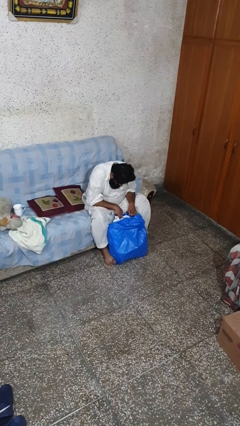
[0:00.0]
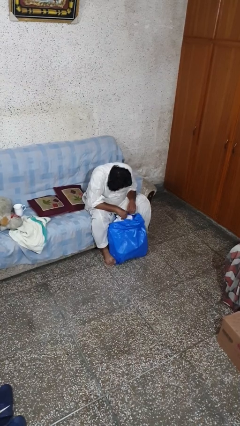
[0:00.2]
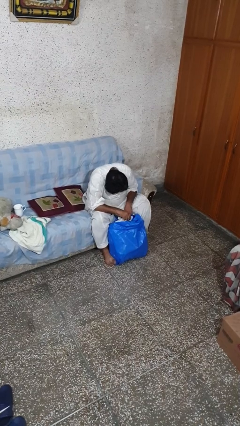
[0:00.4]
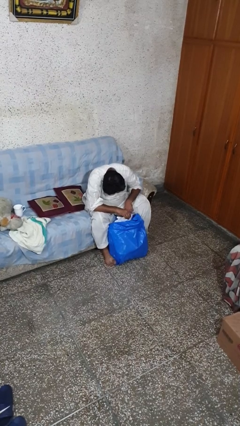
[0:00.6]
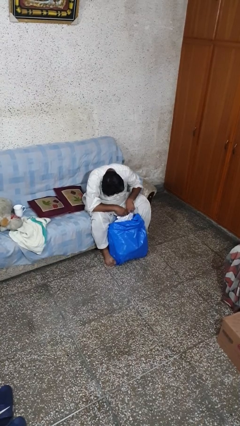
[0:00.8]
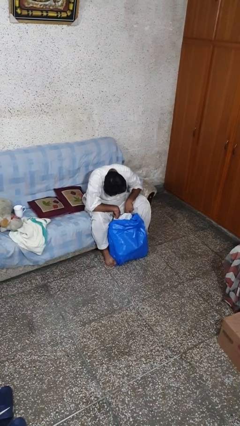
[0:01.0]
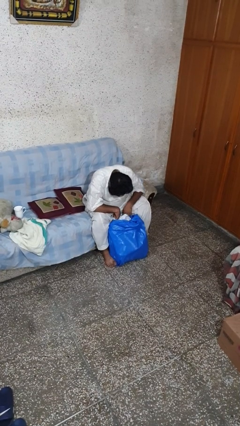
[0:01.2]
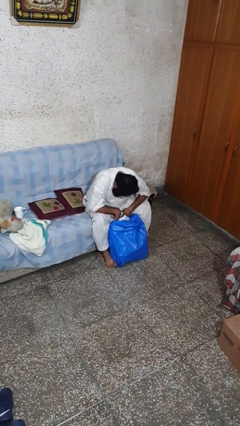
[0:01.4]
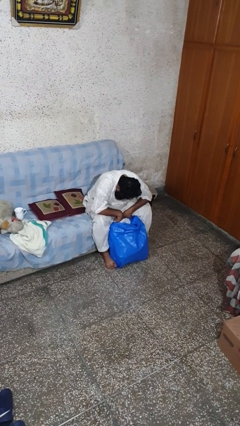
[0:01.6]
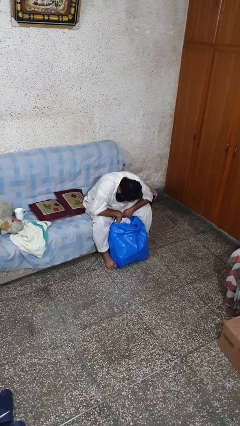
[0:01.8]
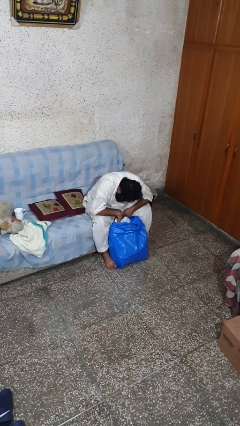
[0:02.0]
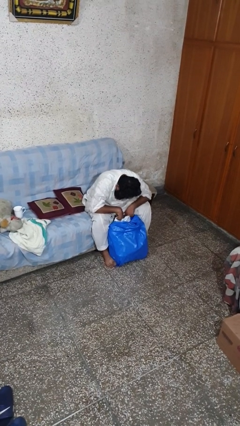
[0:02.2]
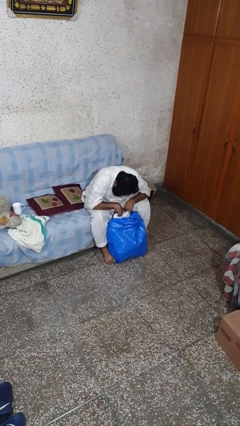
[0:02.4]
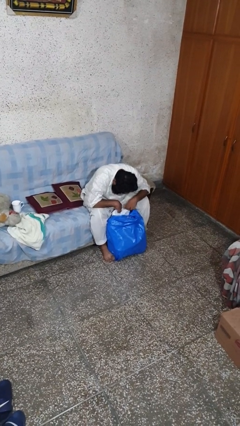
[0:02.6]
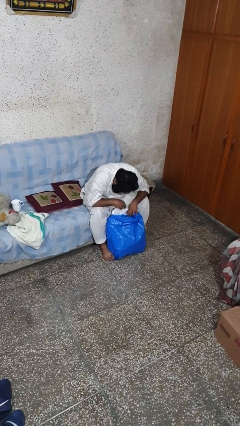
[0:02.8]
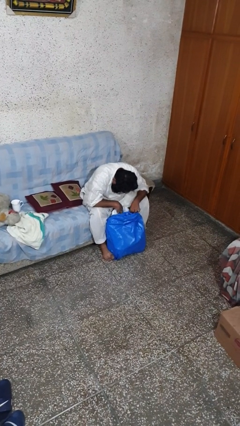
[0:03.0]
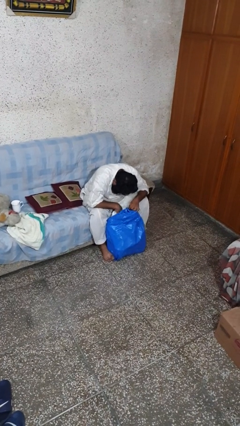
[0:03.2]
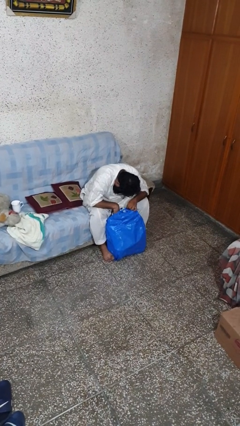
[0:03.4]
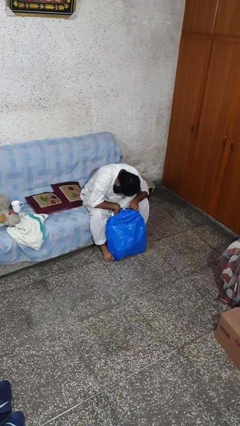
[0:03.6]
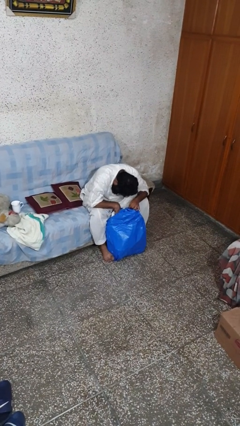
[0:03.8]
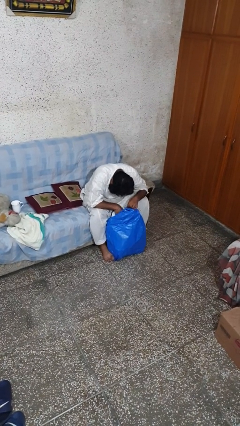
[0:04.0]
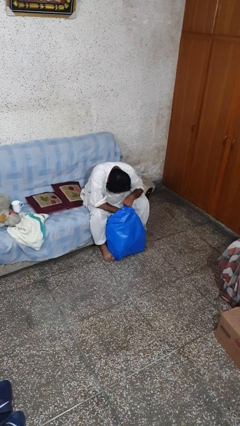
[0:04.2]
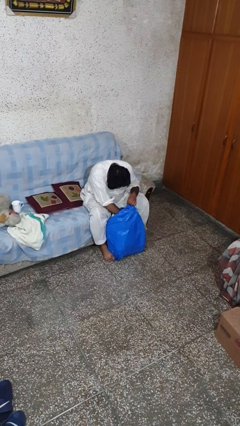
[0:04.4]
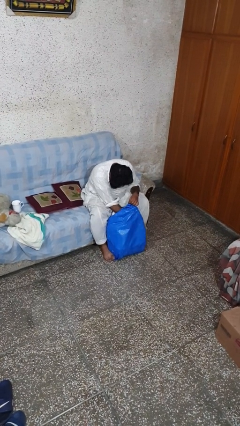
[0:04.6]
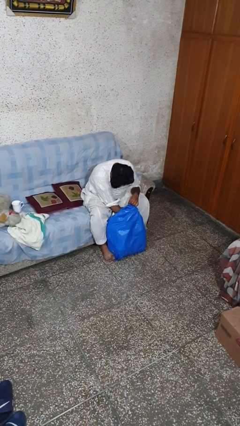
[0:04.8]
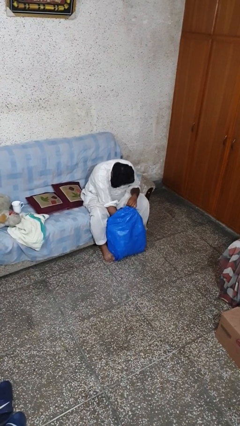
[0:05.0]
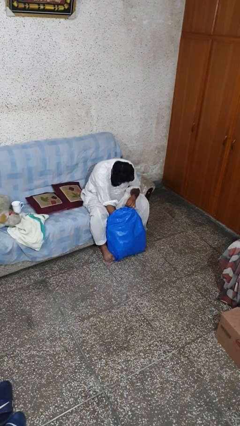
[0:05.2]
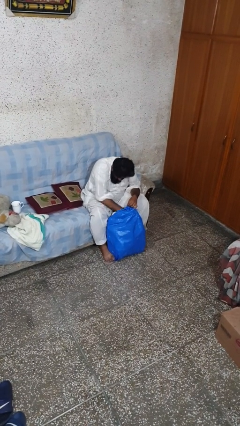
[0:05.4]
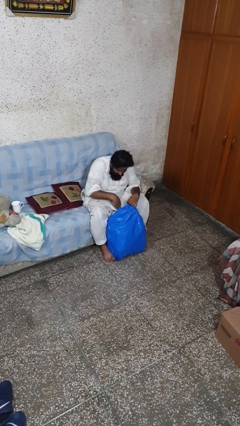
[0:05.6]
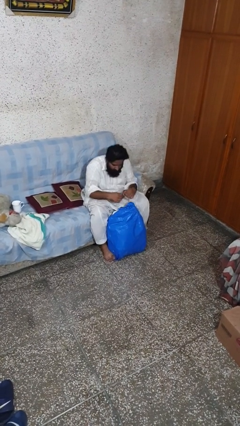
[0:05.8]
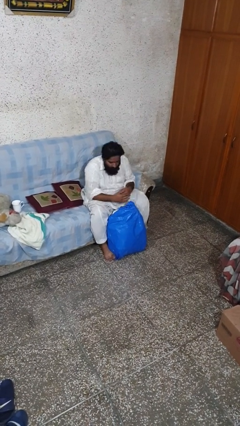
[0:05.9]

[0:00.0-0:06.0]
person searches in bag

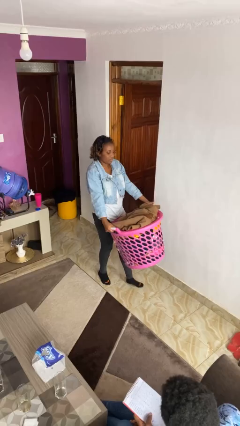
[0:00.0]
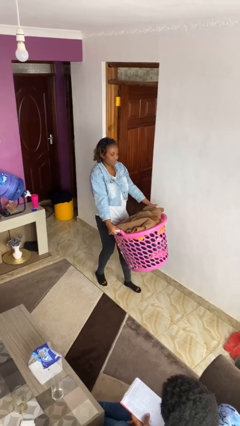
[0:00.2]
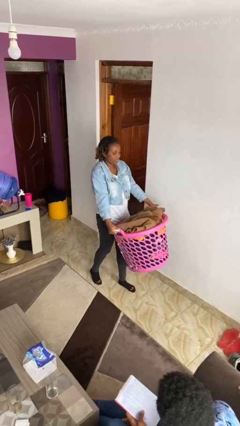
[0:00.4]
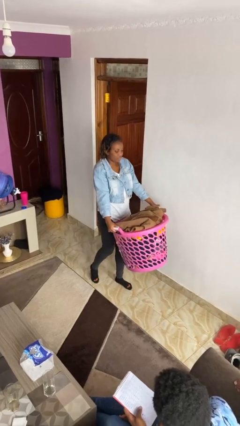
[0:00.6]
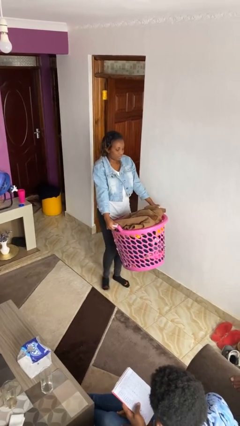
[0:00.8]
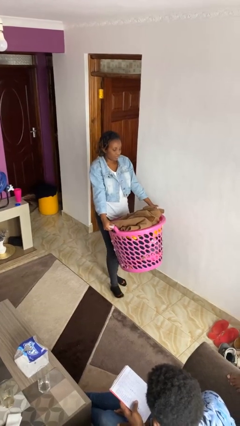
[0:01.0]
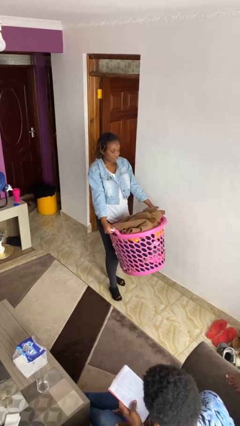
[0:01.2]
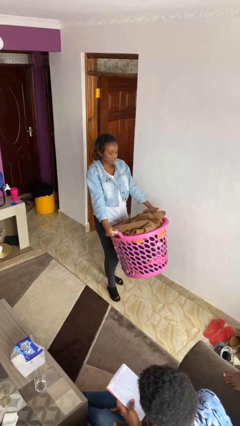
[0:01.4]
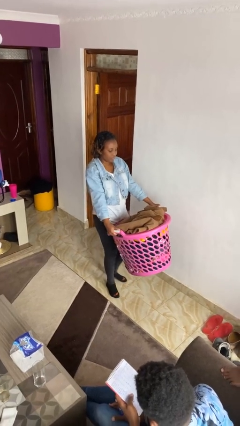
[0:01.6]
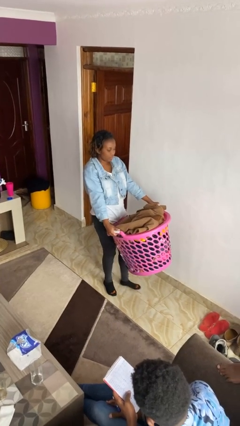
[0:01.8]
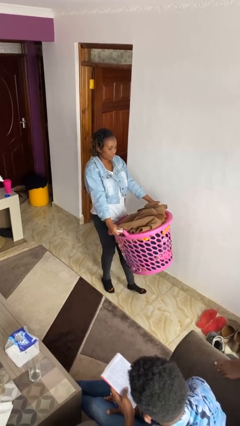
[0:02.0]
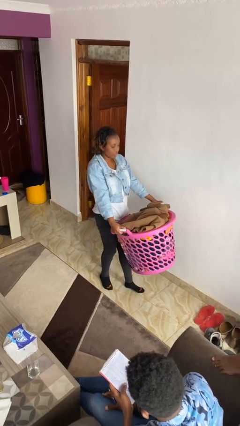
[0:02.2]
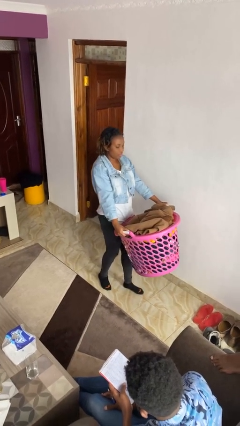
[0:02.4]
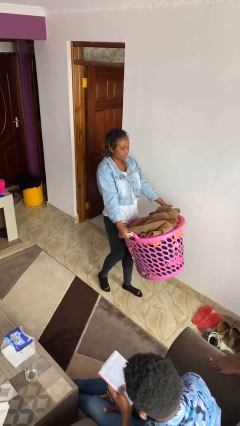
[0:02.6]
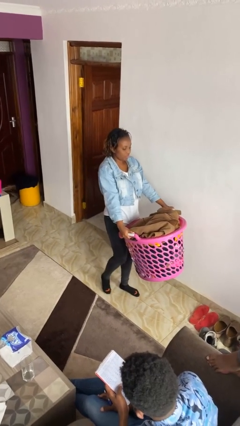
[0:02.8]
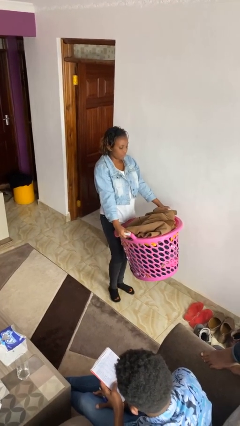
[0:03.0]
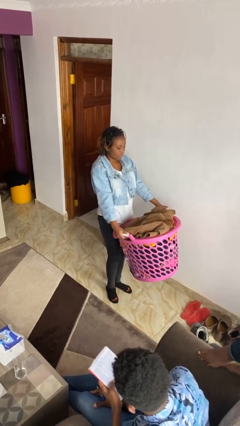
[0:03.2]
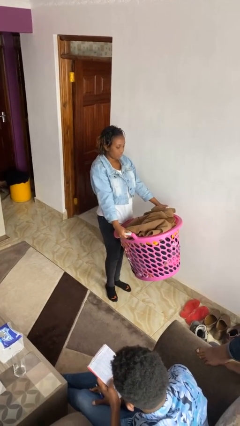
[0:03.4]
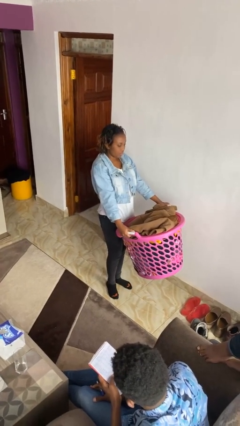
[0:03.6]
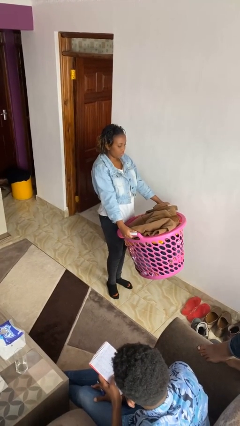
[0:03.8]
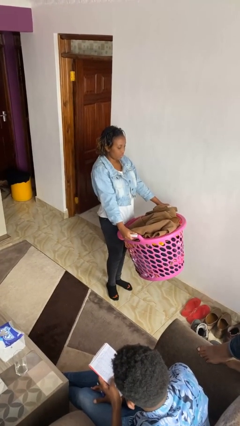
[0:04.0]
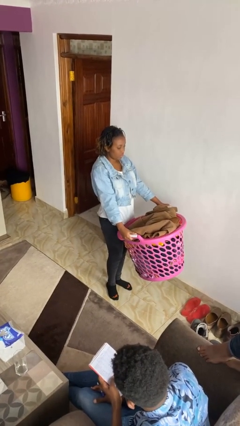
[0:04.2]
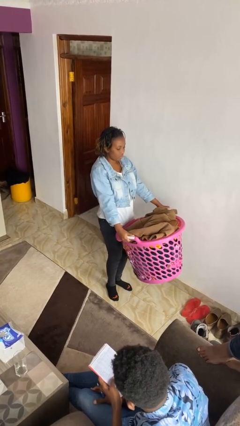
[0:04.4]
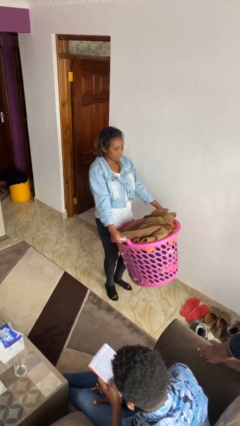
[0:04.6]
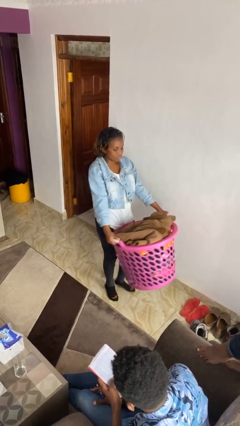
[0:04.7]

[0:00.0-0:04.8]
person carries laundry basket

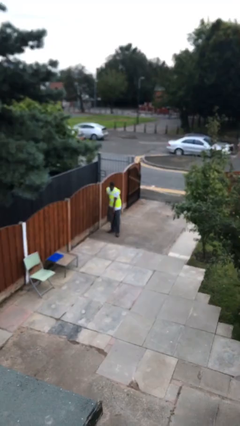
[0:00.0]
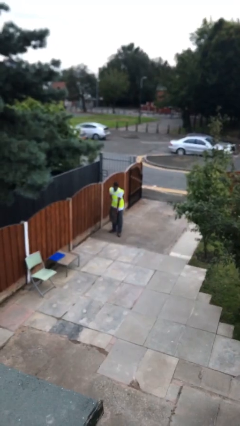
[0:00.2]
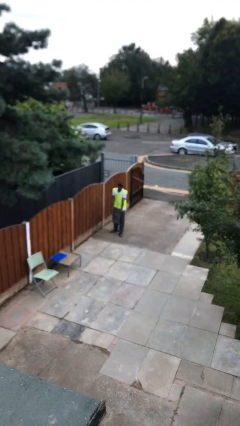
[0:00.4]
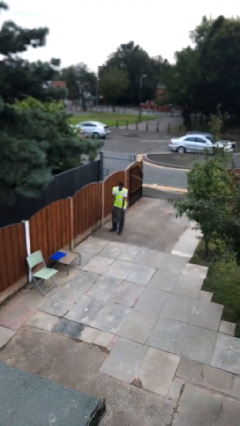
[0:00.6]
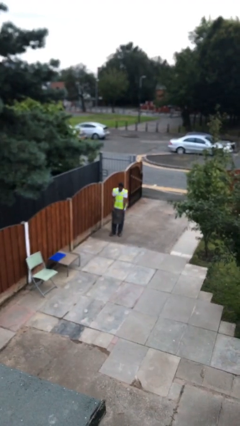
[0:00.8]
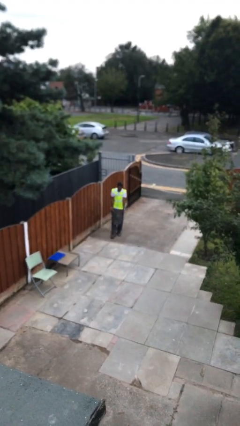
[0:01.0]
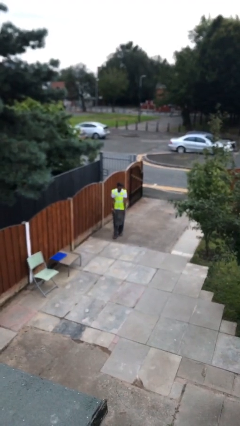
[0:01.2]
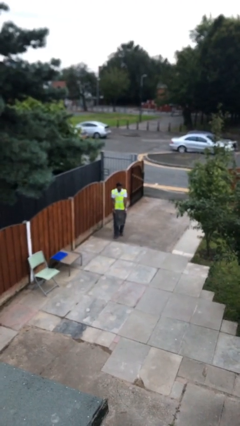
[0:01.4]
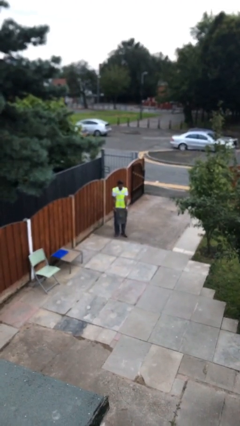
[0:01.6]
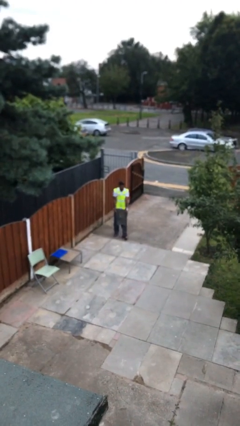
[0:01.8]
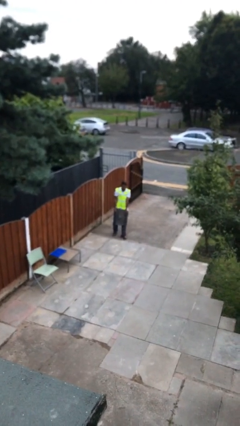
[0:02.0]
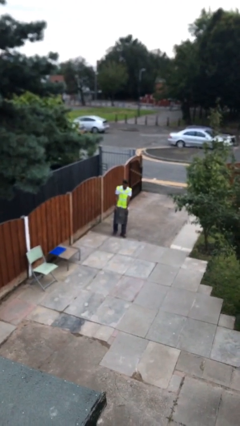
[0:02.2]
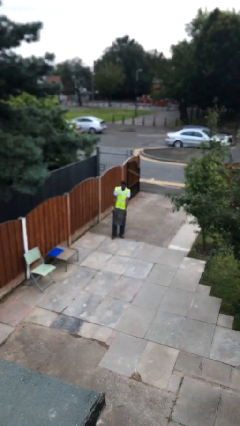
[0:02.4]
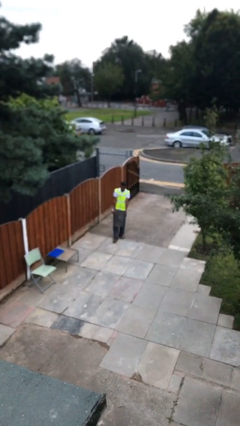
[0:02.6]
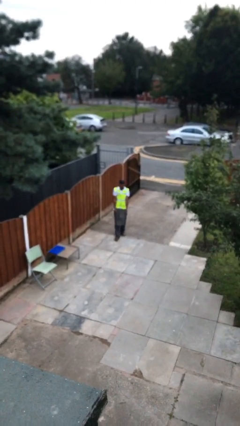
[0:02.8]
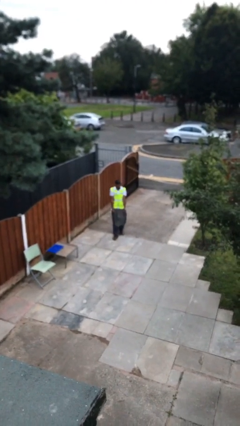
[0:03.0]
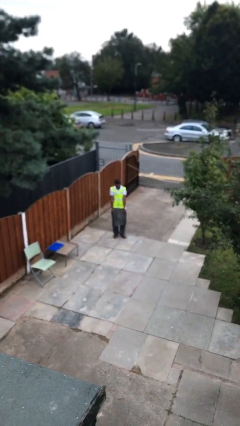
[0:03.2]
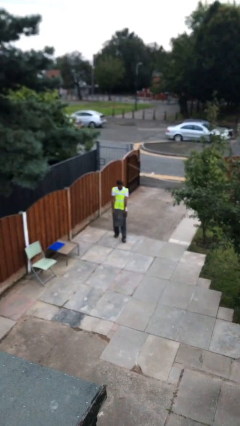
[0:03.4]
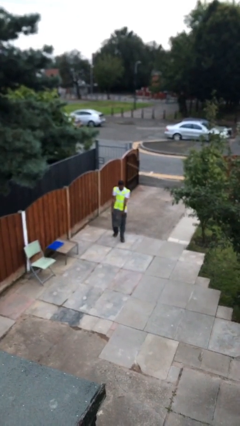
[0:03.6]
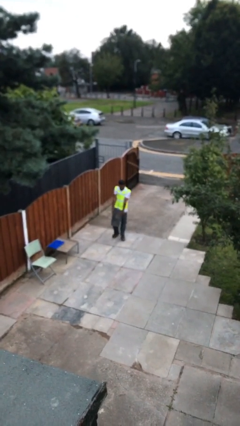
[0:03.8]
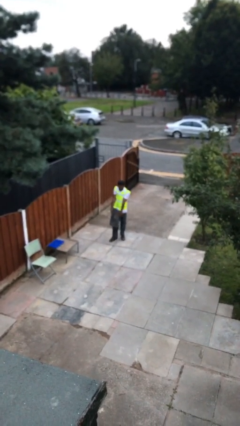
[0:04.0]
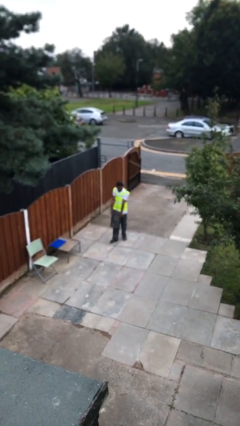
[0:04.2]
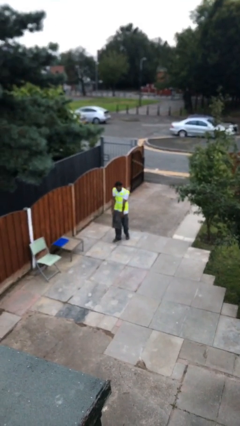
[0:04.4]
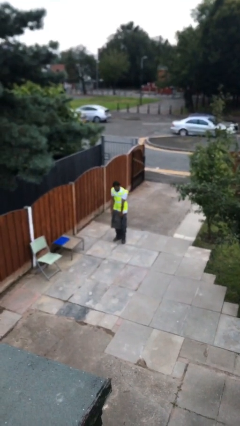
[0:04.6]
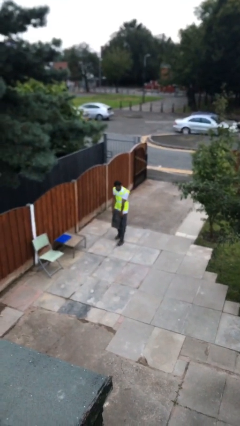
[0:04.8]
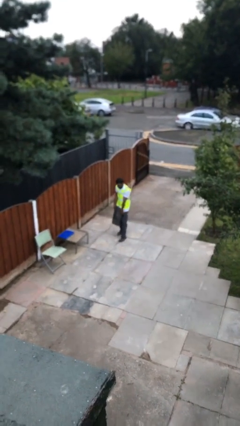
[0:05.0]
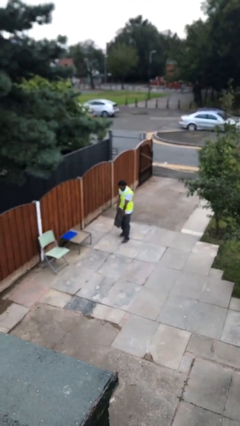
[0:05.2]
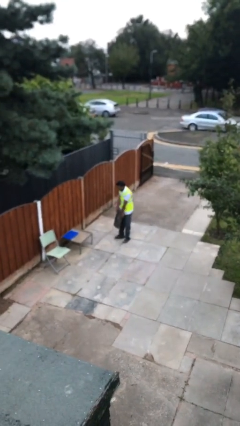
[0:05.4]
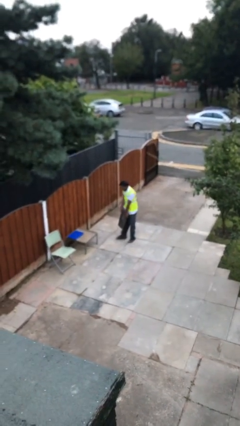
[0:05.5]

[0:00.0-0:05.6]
person carries heavy object

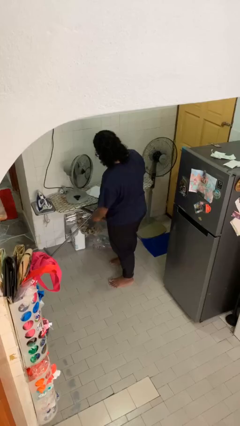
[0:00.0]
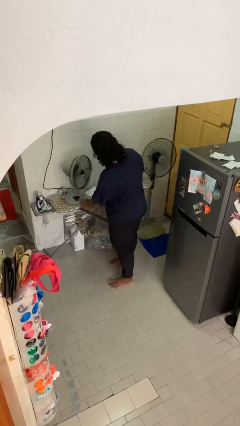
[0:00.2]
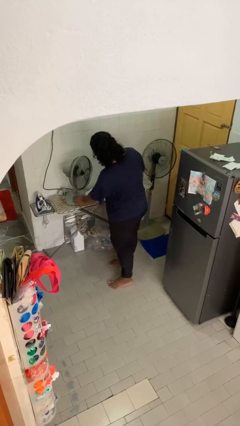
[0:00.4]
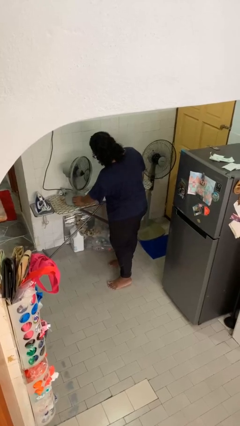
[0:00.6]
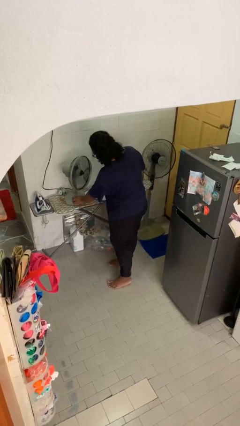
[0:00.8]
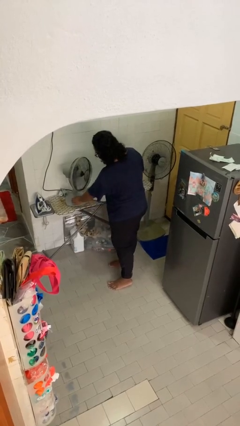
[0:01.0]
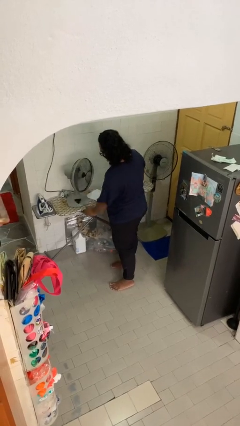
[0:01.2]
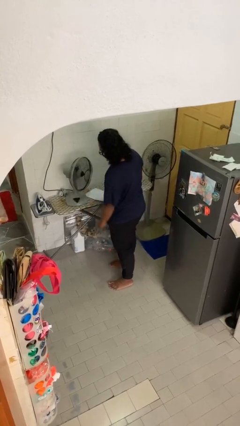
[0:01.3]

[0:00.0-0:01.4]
person turns off fan
